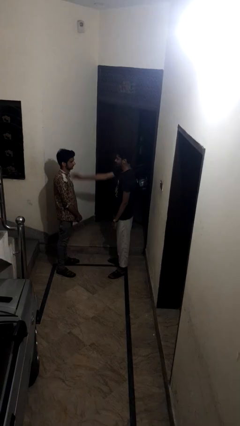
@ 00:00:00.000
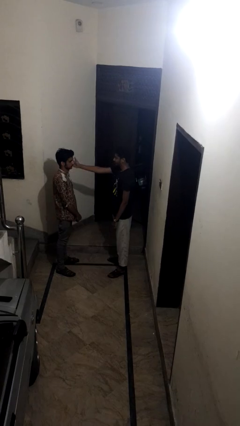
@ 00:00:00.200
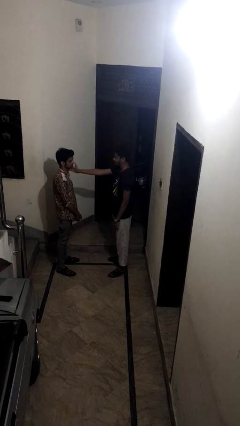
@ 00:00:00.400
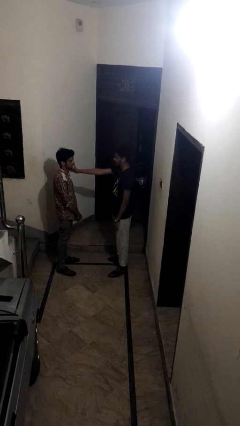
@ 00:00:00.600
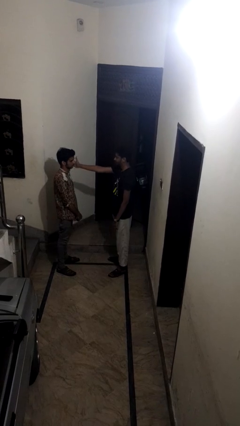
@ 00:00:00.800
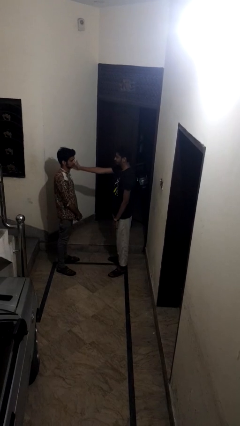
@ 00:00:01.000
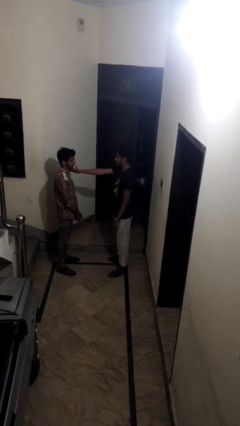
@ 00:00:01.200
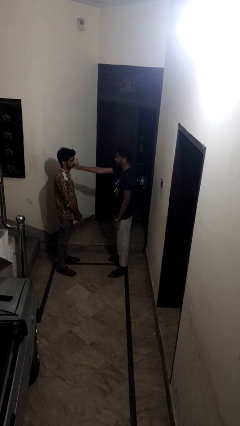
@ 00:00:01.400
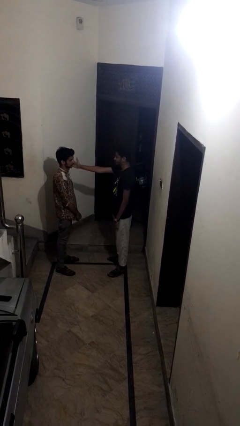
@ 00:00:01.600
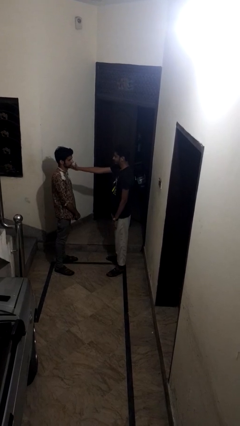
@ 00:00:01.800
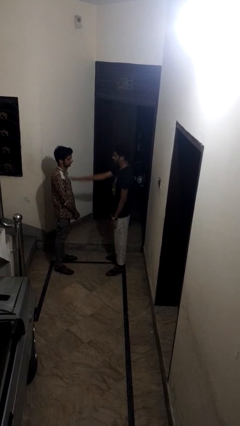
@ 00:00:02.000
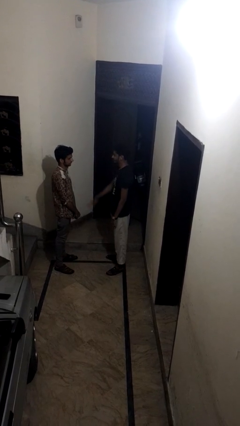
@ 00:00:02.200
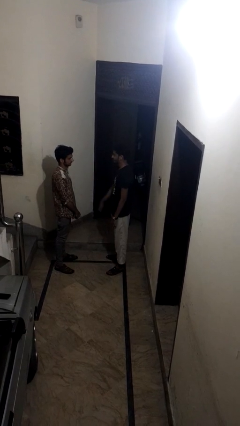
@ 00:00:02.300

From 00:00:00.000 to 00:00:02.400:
person touches face of person

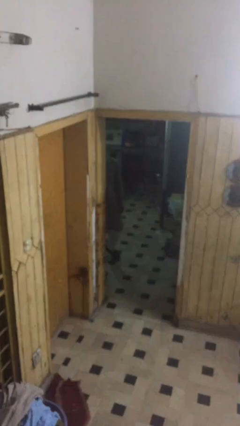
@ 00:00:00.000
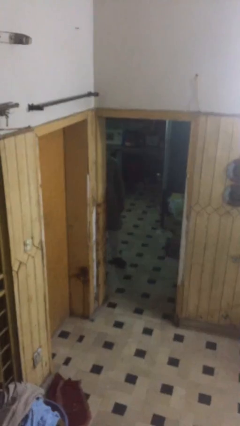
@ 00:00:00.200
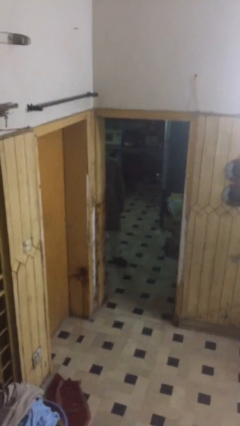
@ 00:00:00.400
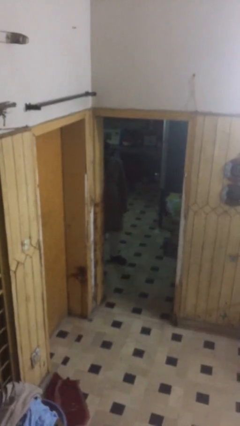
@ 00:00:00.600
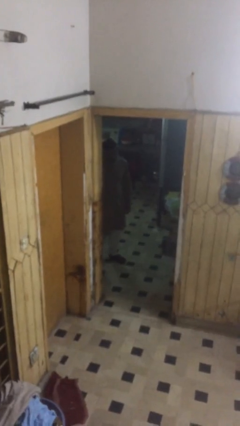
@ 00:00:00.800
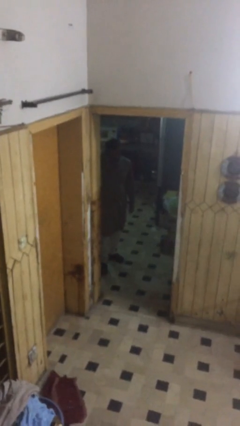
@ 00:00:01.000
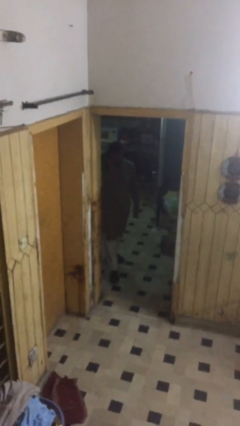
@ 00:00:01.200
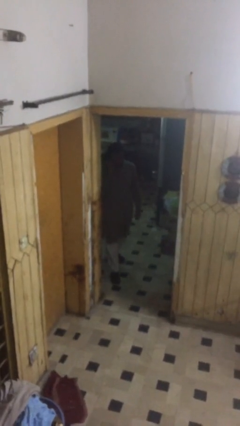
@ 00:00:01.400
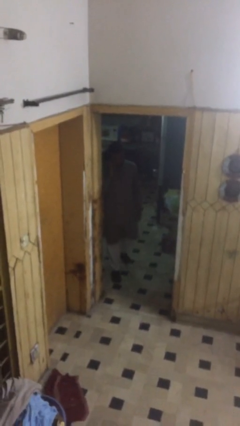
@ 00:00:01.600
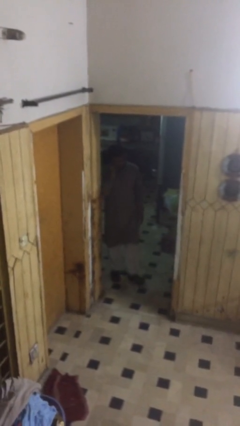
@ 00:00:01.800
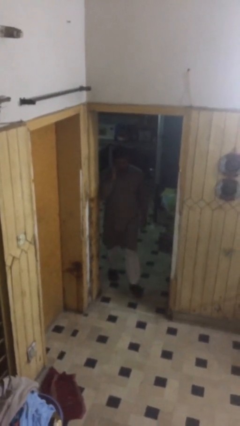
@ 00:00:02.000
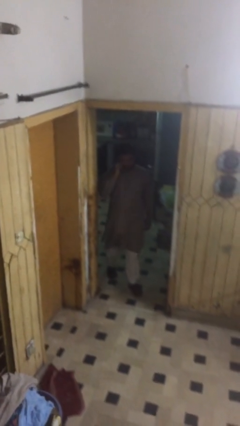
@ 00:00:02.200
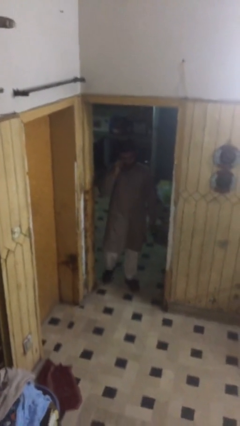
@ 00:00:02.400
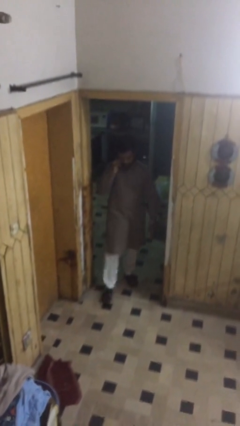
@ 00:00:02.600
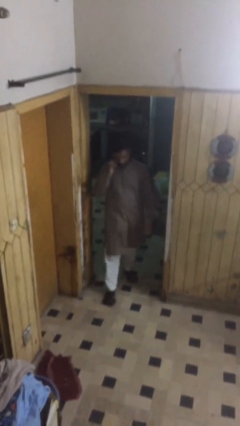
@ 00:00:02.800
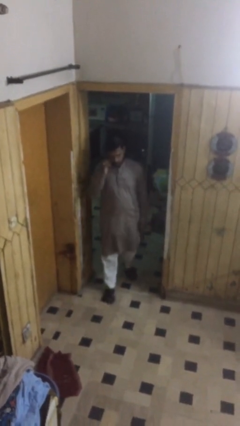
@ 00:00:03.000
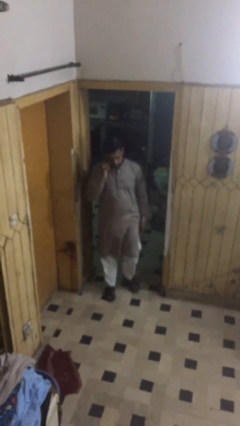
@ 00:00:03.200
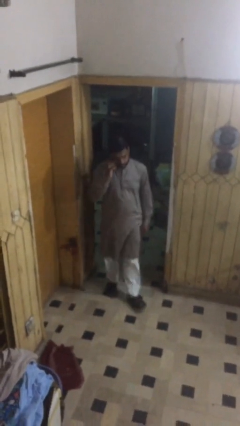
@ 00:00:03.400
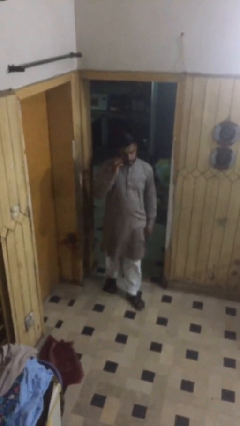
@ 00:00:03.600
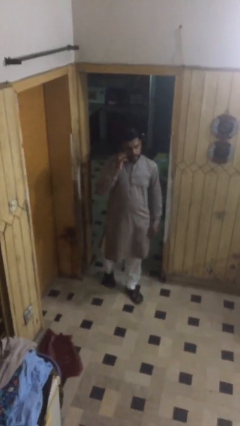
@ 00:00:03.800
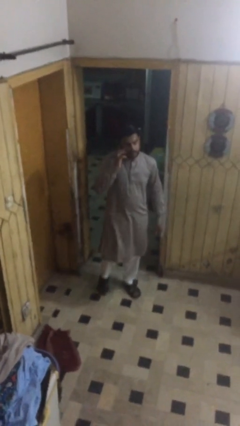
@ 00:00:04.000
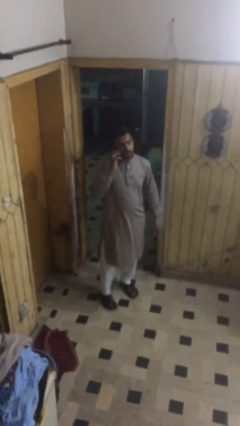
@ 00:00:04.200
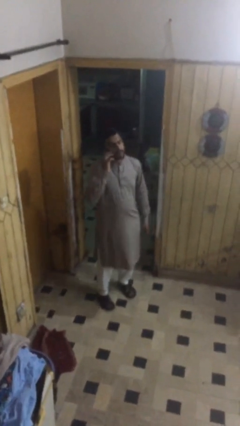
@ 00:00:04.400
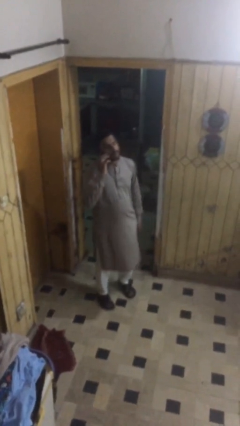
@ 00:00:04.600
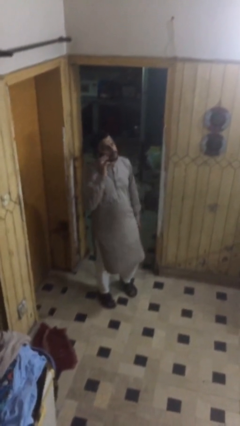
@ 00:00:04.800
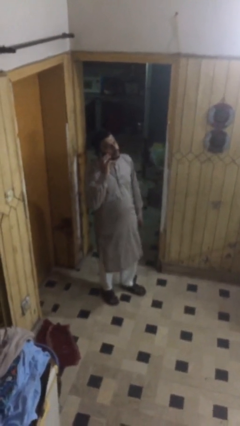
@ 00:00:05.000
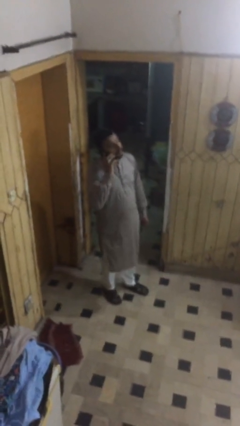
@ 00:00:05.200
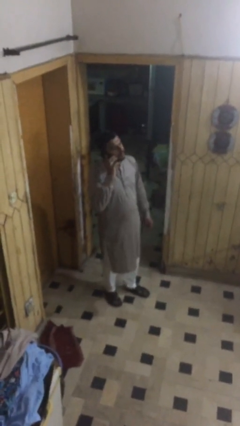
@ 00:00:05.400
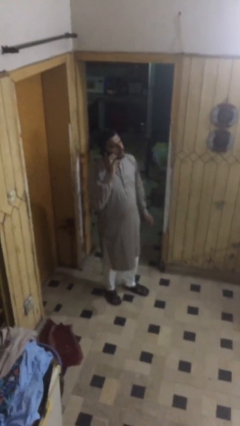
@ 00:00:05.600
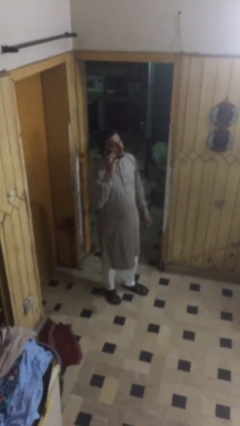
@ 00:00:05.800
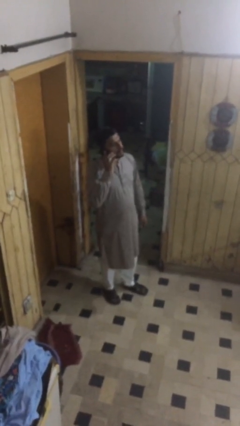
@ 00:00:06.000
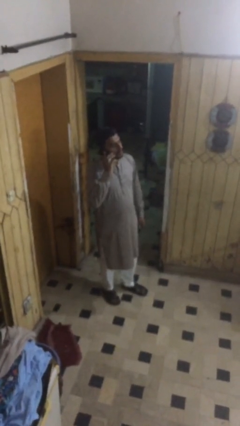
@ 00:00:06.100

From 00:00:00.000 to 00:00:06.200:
person enters scene through structure

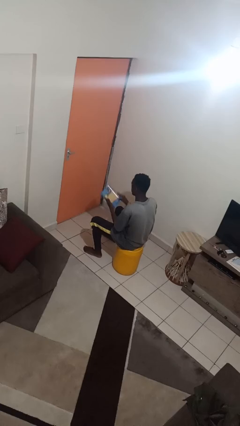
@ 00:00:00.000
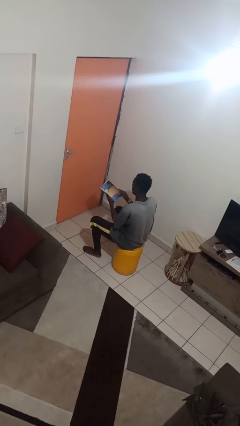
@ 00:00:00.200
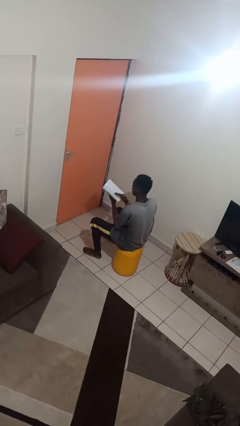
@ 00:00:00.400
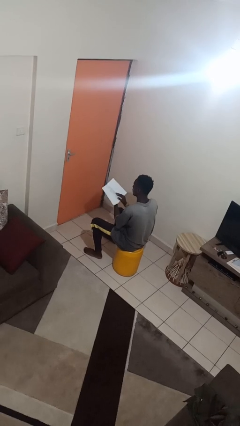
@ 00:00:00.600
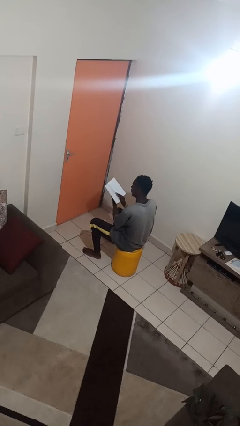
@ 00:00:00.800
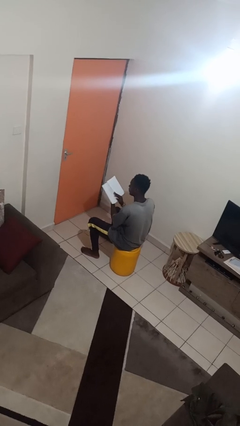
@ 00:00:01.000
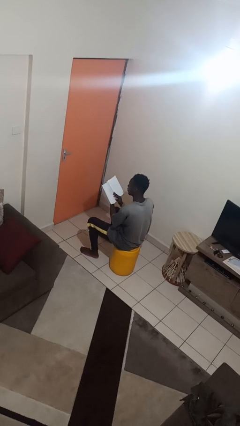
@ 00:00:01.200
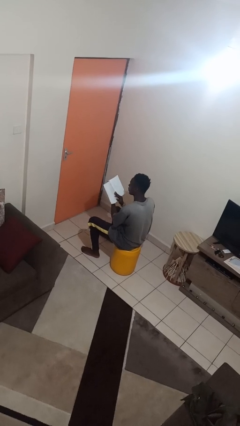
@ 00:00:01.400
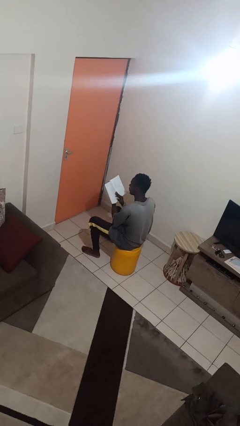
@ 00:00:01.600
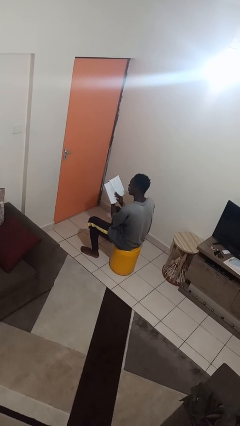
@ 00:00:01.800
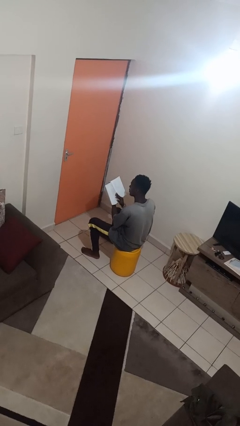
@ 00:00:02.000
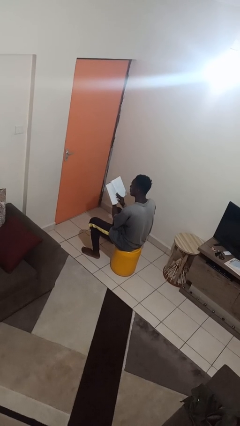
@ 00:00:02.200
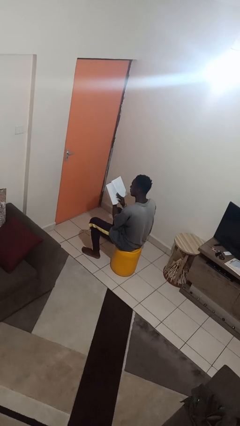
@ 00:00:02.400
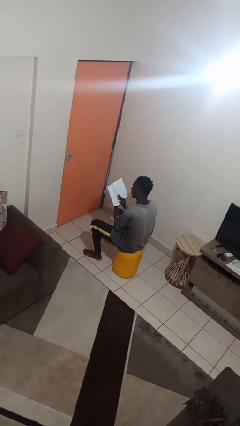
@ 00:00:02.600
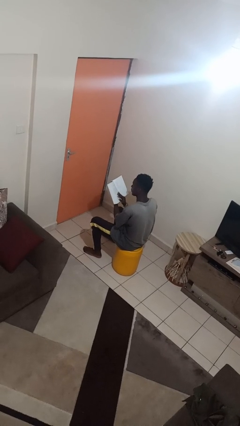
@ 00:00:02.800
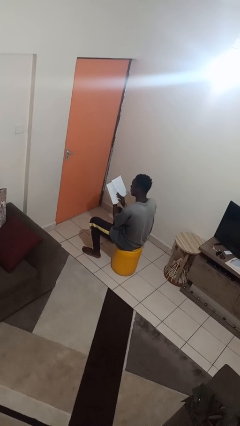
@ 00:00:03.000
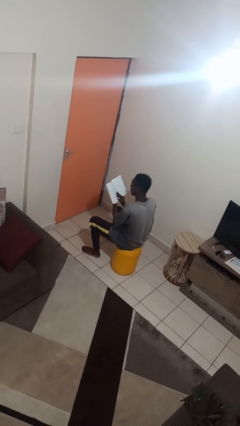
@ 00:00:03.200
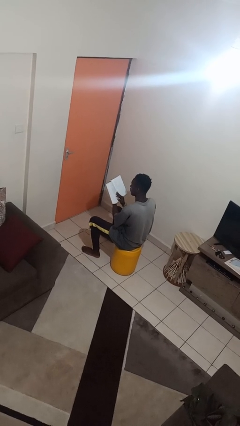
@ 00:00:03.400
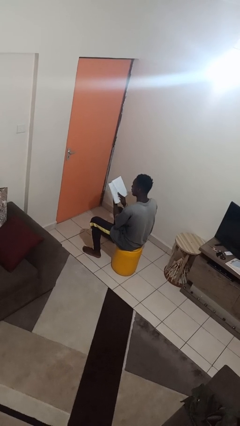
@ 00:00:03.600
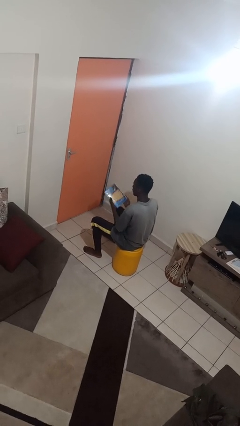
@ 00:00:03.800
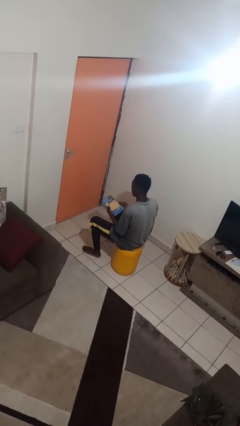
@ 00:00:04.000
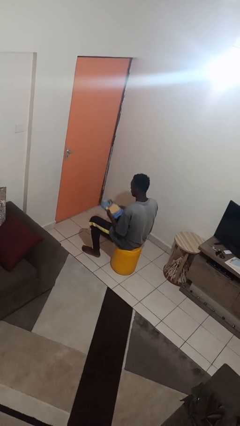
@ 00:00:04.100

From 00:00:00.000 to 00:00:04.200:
person reads book

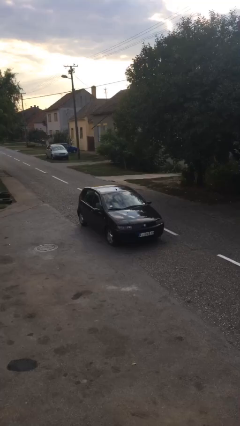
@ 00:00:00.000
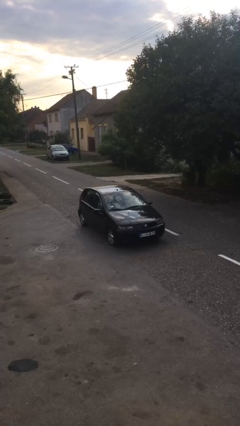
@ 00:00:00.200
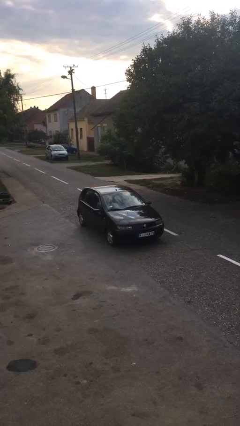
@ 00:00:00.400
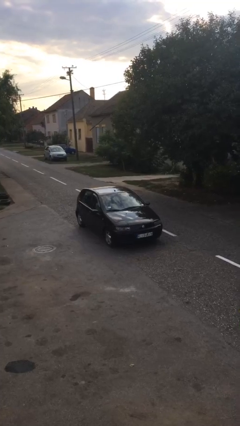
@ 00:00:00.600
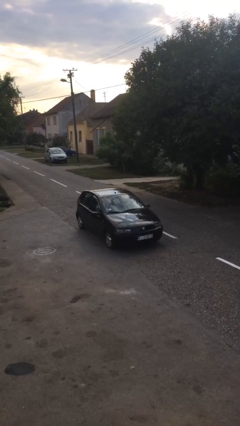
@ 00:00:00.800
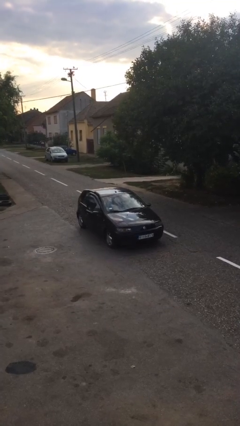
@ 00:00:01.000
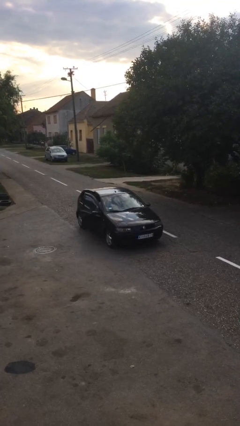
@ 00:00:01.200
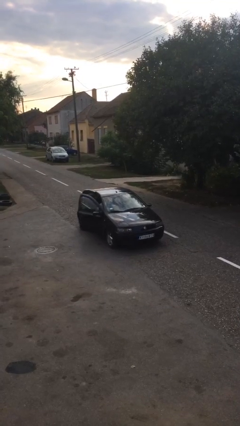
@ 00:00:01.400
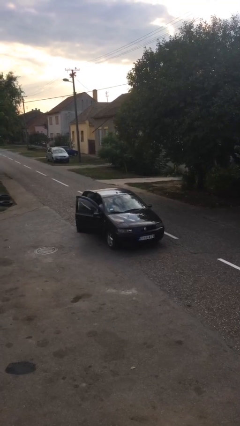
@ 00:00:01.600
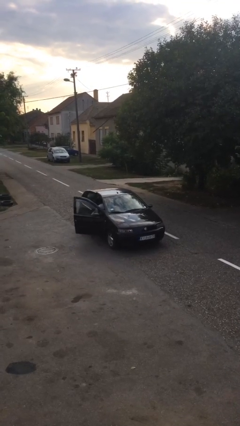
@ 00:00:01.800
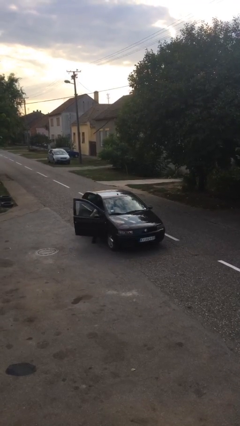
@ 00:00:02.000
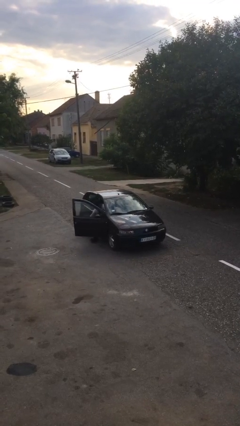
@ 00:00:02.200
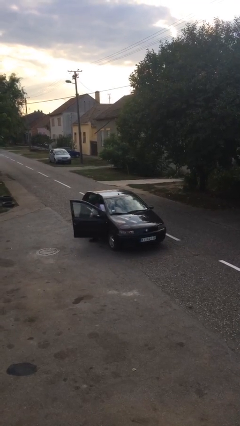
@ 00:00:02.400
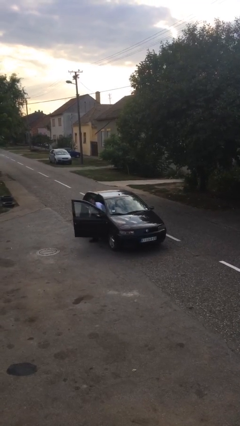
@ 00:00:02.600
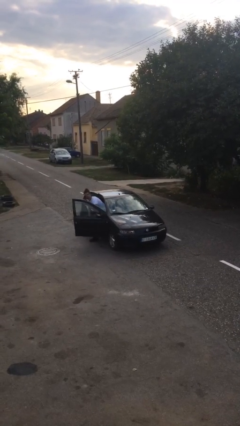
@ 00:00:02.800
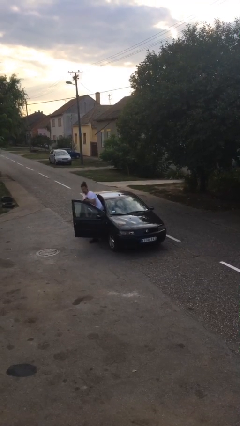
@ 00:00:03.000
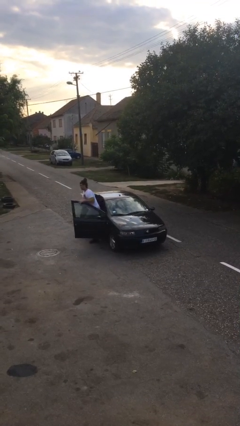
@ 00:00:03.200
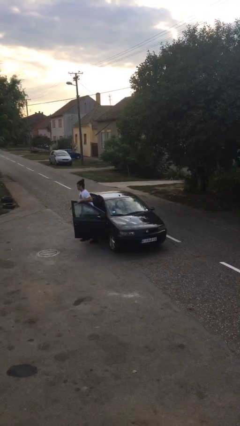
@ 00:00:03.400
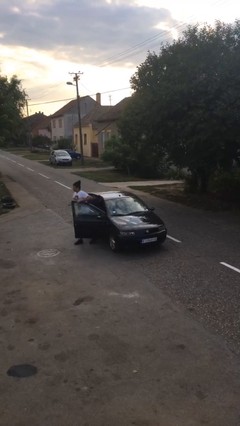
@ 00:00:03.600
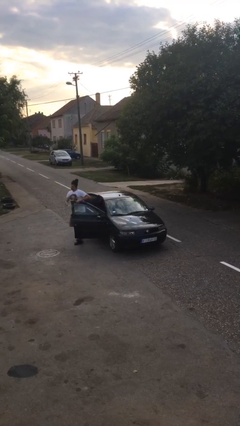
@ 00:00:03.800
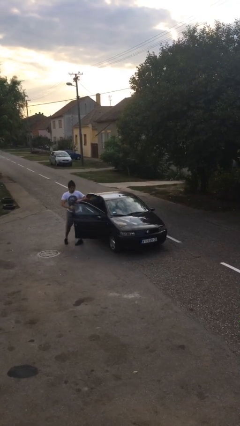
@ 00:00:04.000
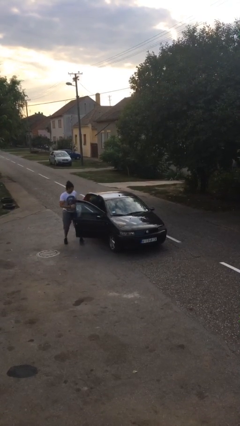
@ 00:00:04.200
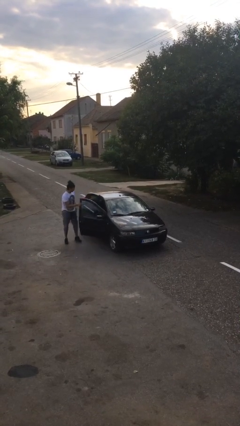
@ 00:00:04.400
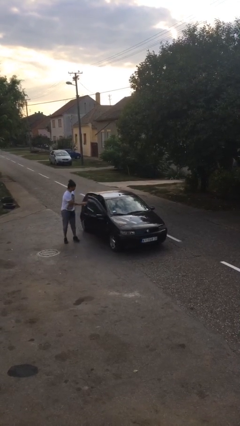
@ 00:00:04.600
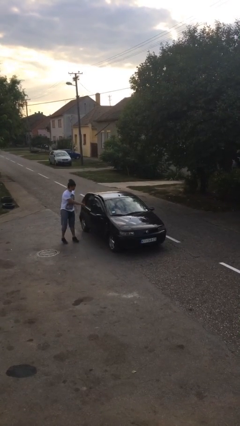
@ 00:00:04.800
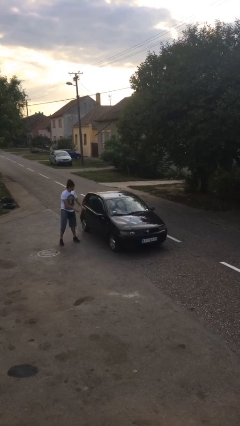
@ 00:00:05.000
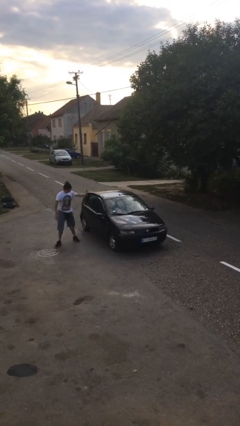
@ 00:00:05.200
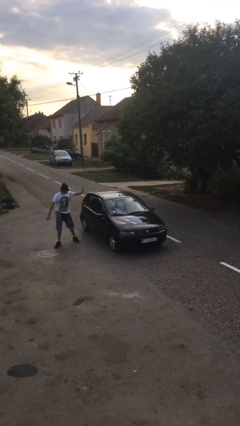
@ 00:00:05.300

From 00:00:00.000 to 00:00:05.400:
car drops off person
